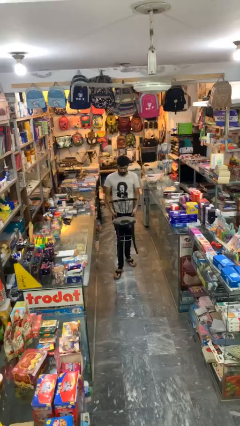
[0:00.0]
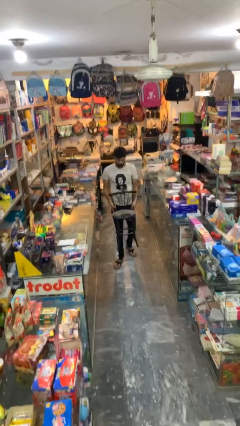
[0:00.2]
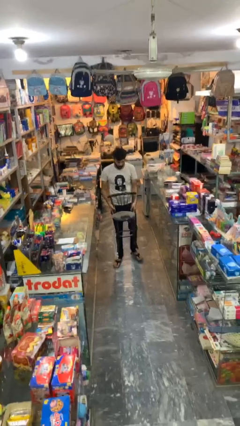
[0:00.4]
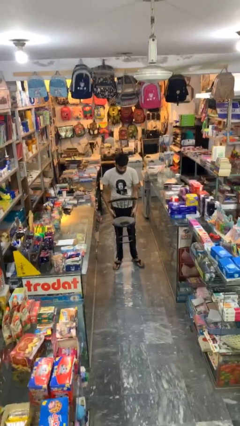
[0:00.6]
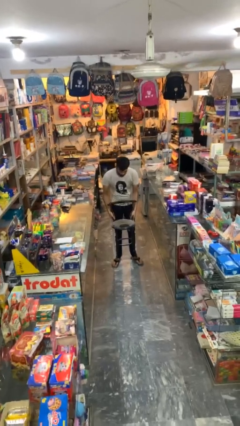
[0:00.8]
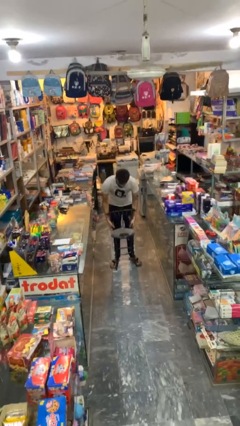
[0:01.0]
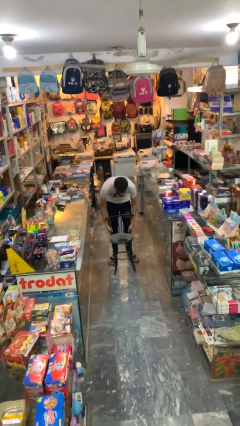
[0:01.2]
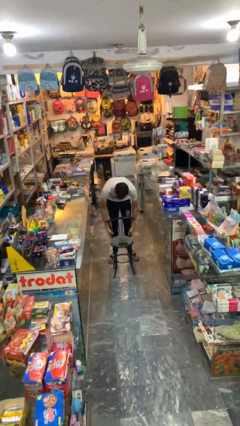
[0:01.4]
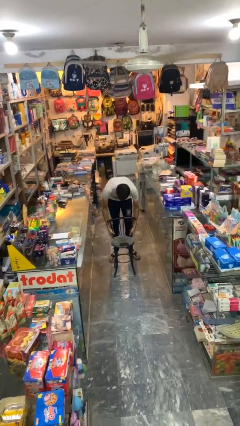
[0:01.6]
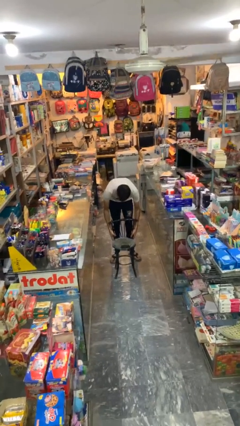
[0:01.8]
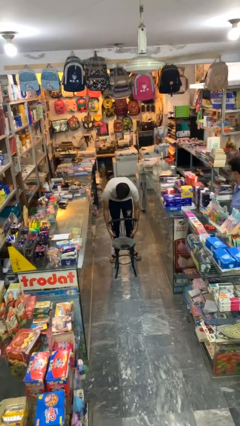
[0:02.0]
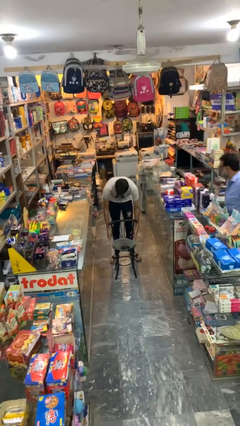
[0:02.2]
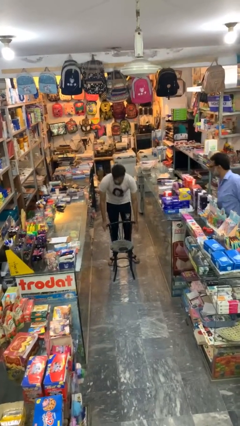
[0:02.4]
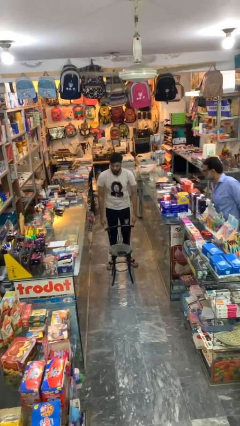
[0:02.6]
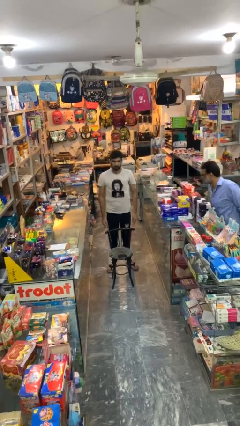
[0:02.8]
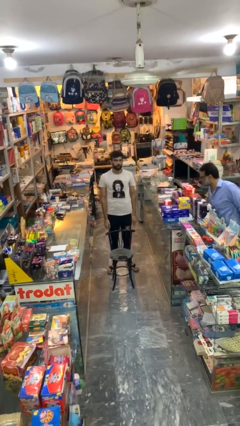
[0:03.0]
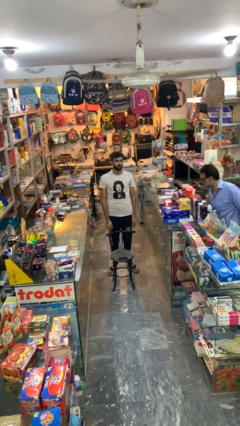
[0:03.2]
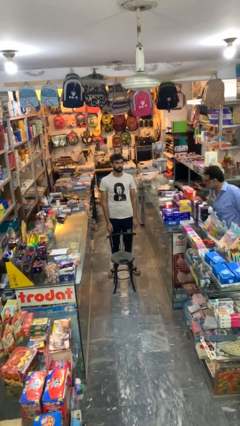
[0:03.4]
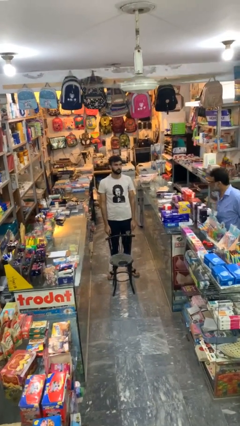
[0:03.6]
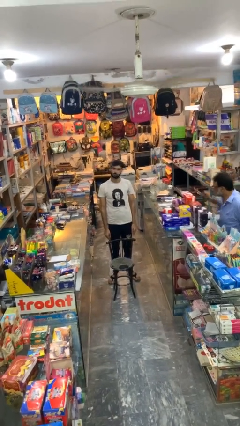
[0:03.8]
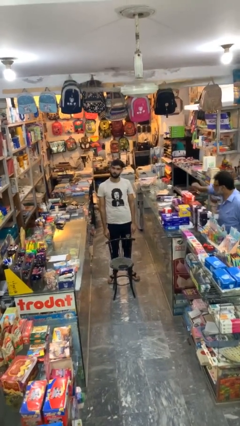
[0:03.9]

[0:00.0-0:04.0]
person puts down object on floor

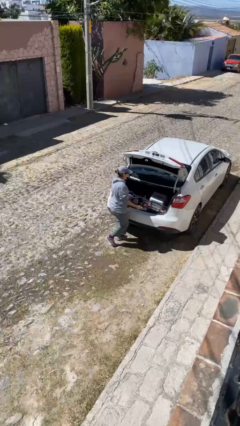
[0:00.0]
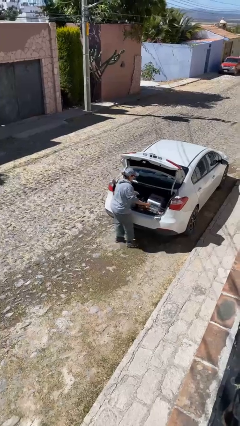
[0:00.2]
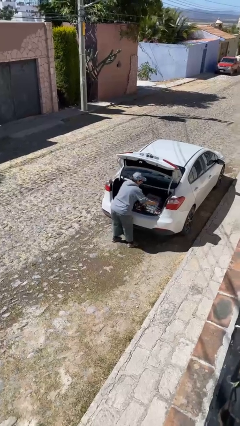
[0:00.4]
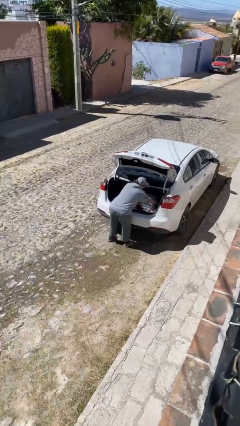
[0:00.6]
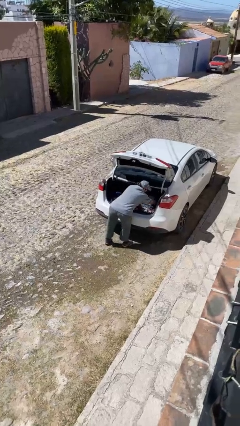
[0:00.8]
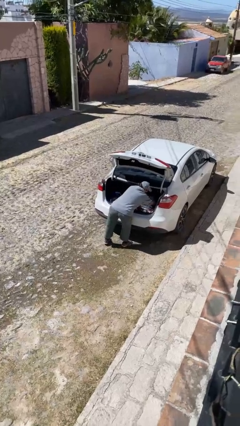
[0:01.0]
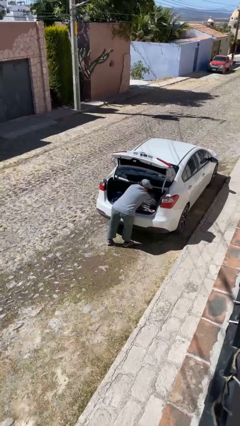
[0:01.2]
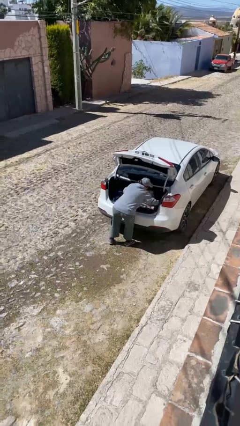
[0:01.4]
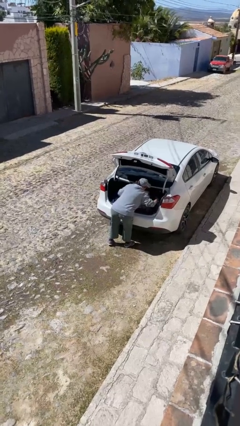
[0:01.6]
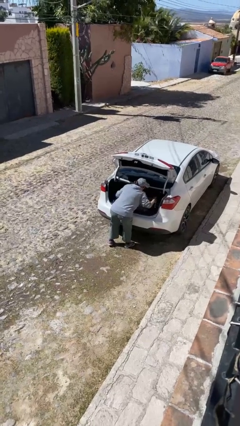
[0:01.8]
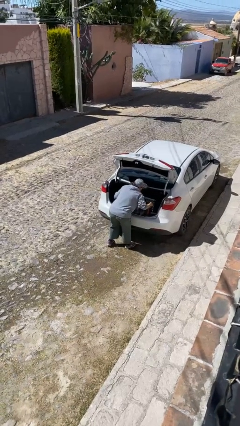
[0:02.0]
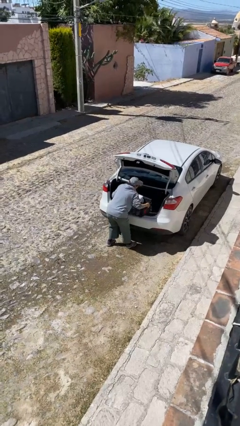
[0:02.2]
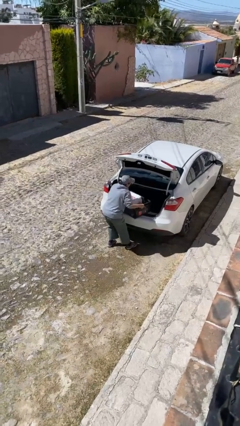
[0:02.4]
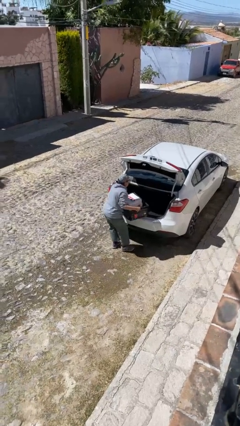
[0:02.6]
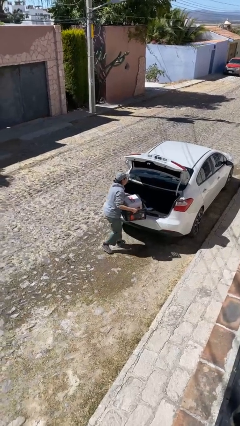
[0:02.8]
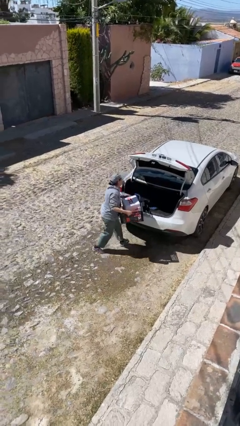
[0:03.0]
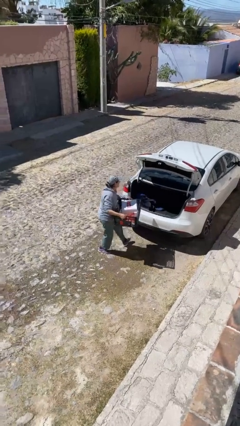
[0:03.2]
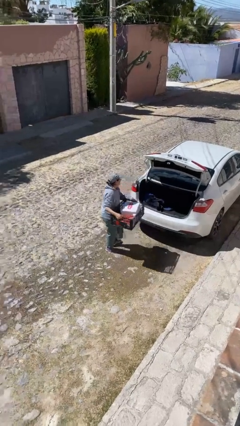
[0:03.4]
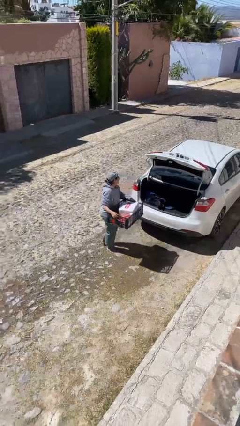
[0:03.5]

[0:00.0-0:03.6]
person unloads car

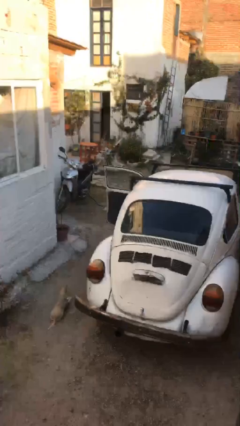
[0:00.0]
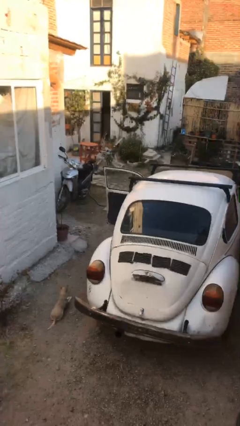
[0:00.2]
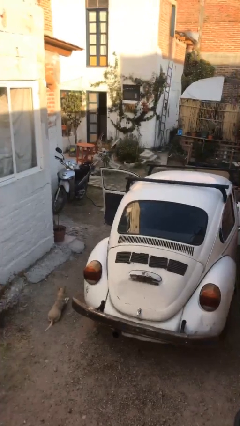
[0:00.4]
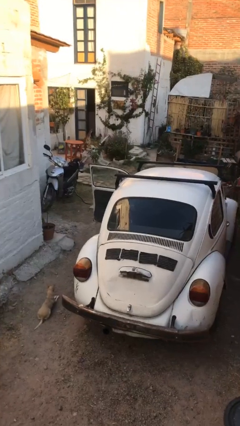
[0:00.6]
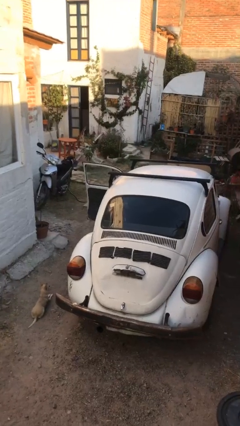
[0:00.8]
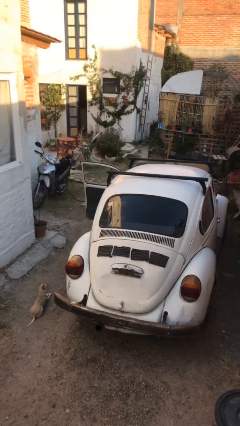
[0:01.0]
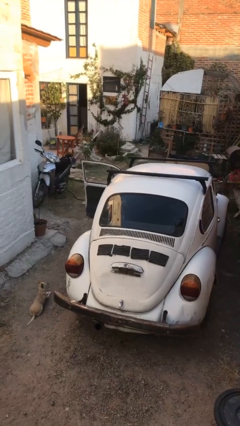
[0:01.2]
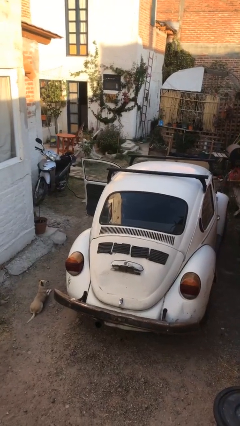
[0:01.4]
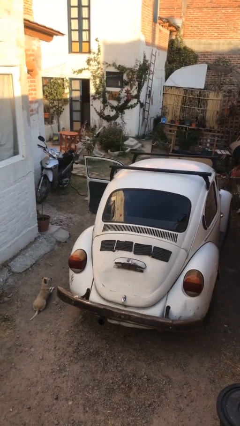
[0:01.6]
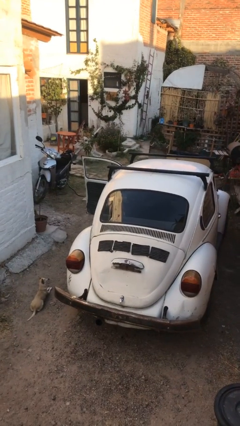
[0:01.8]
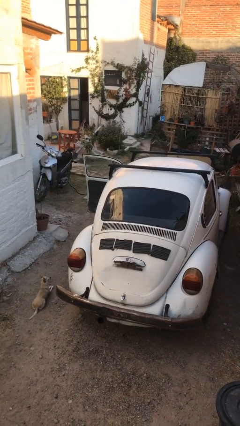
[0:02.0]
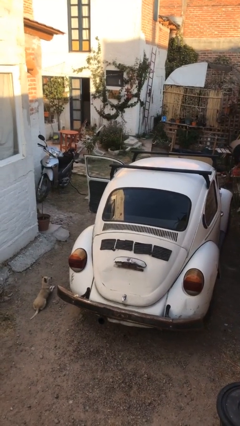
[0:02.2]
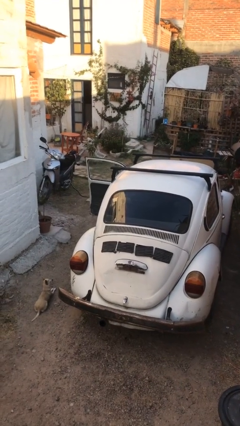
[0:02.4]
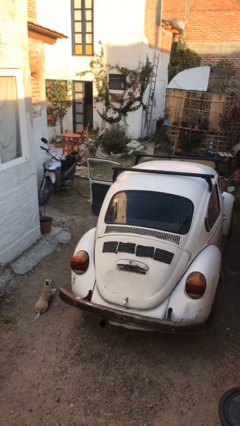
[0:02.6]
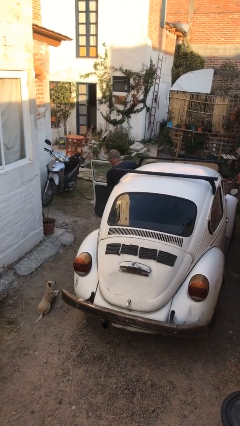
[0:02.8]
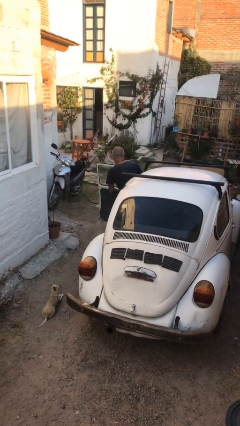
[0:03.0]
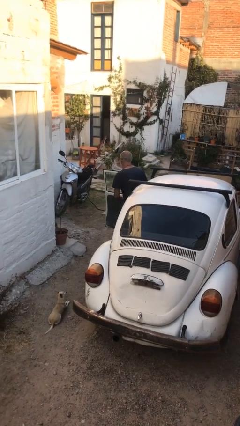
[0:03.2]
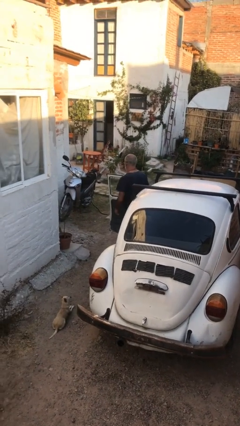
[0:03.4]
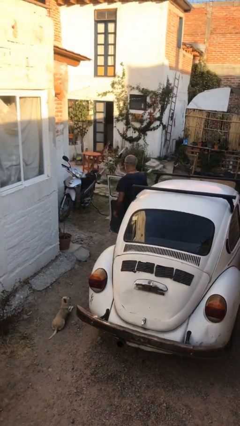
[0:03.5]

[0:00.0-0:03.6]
person exits car

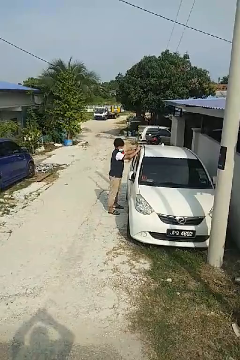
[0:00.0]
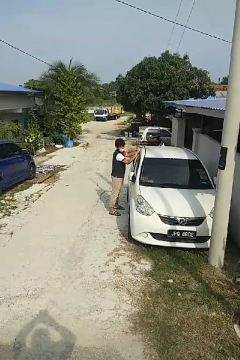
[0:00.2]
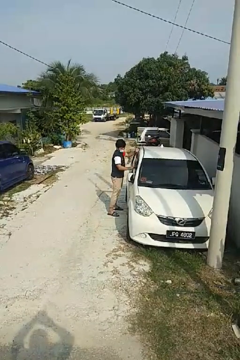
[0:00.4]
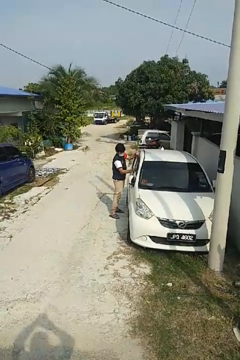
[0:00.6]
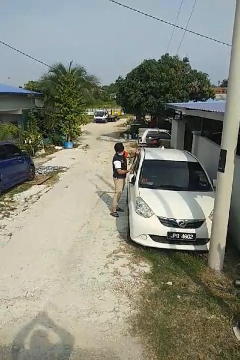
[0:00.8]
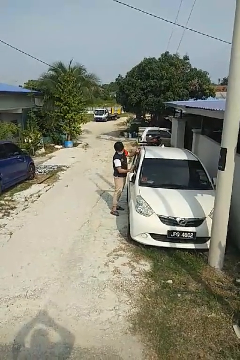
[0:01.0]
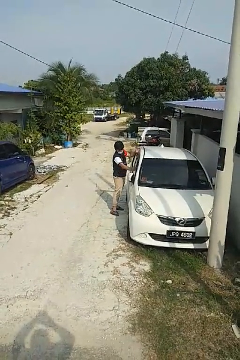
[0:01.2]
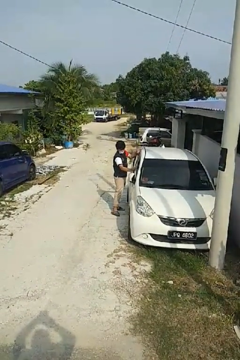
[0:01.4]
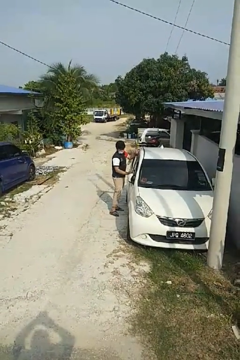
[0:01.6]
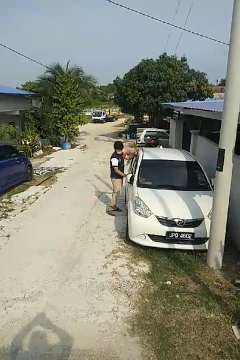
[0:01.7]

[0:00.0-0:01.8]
person polishes car with rag

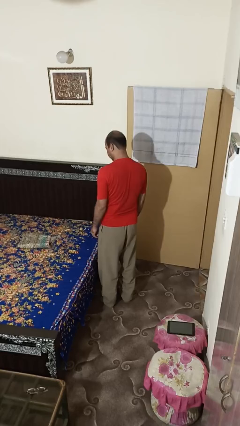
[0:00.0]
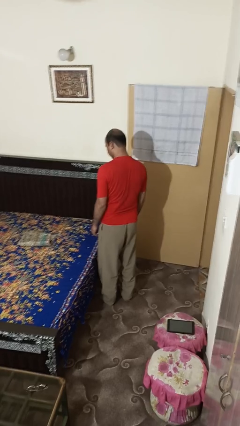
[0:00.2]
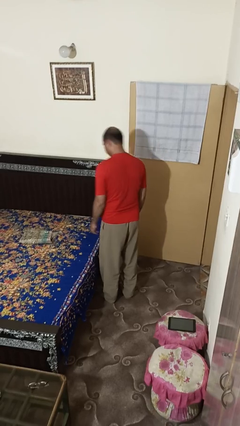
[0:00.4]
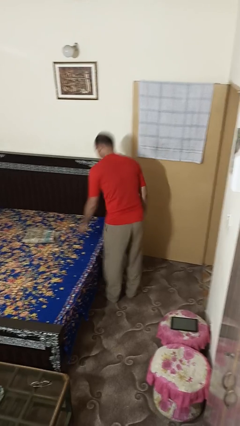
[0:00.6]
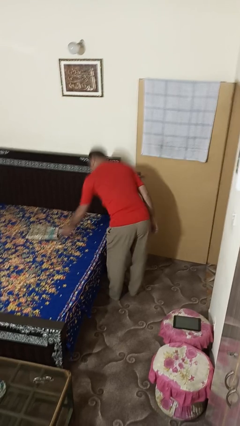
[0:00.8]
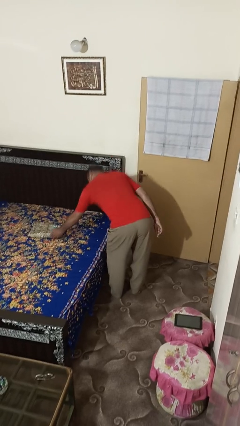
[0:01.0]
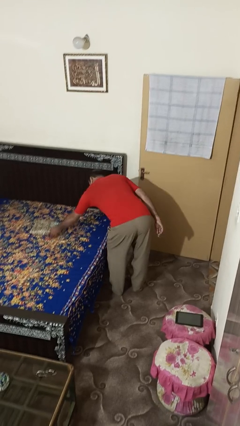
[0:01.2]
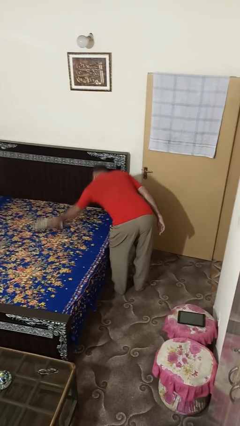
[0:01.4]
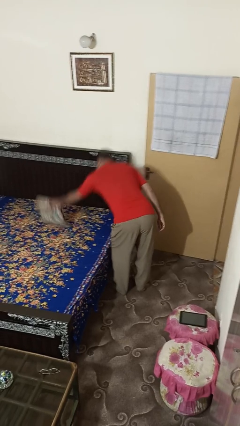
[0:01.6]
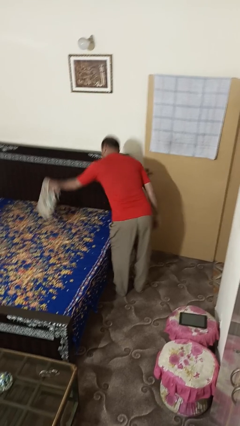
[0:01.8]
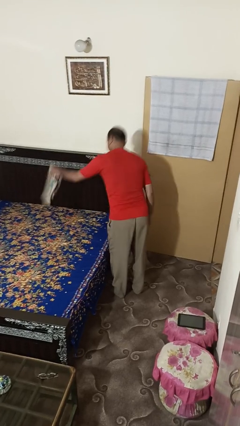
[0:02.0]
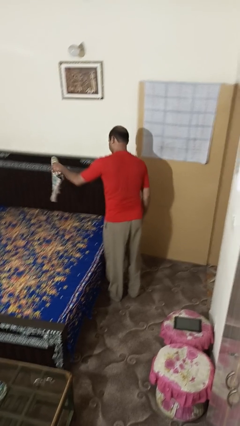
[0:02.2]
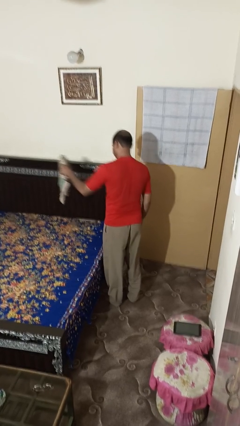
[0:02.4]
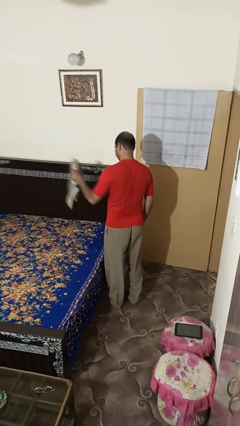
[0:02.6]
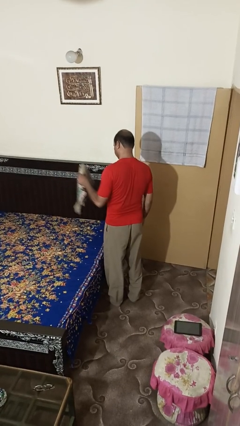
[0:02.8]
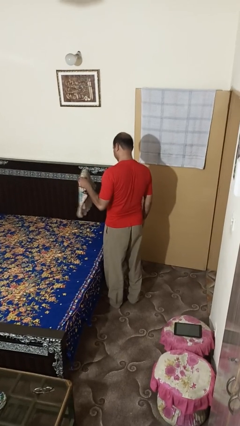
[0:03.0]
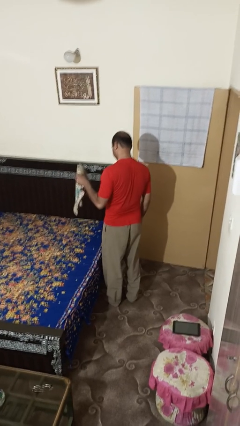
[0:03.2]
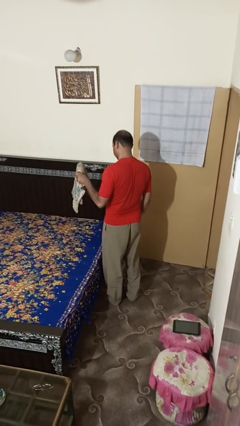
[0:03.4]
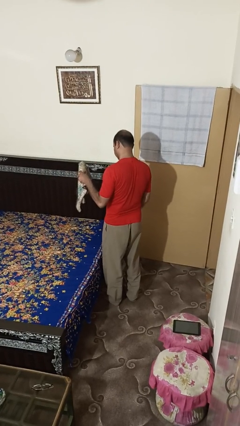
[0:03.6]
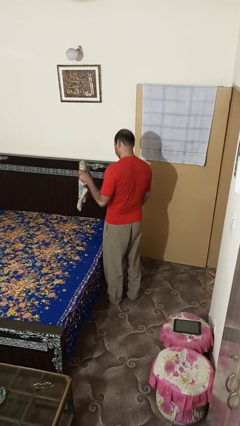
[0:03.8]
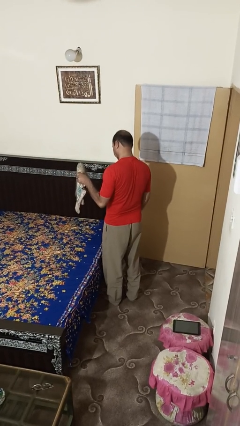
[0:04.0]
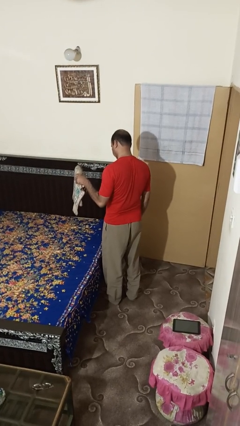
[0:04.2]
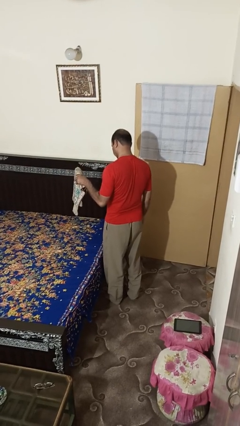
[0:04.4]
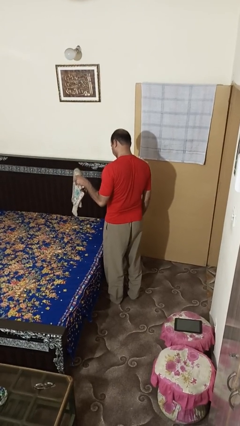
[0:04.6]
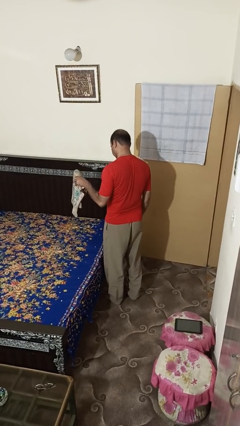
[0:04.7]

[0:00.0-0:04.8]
person picks up object from bed
